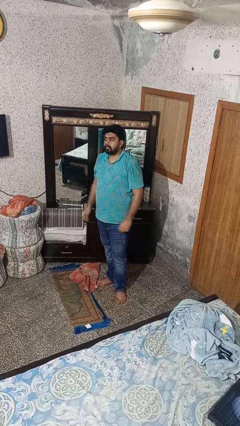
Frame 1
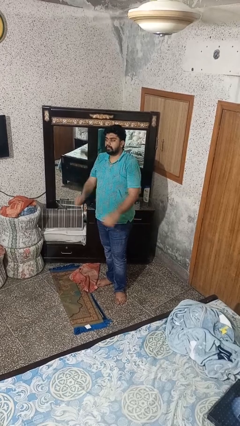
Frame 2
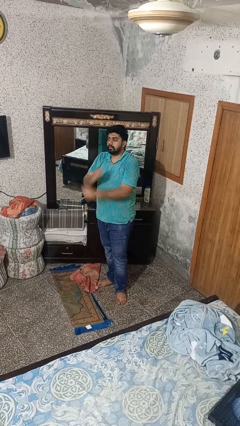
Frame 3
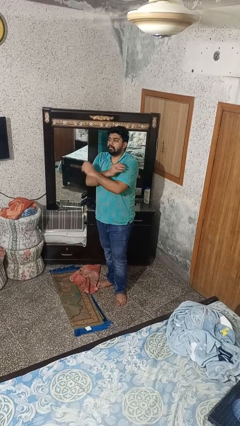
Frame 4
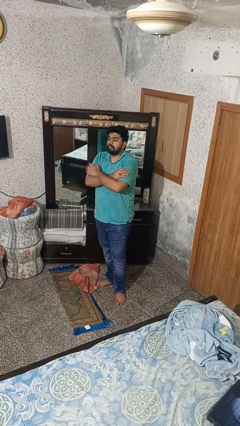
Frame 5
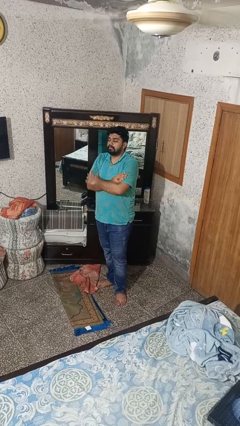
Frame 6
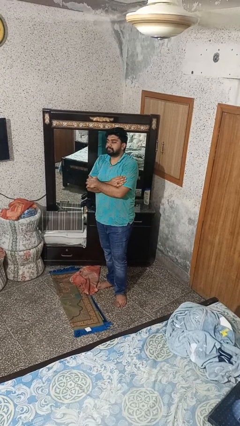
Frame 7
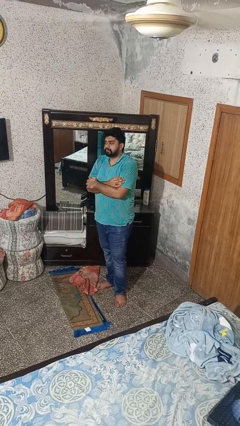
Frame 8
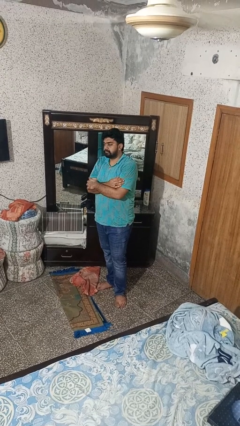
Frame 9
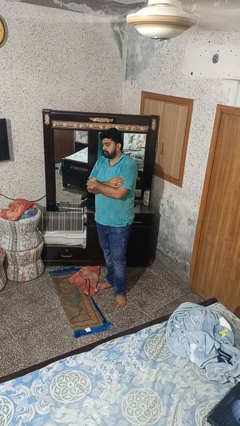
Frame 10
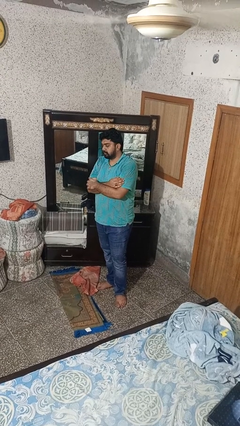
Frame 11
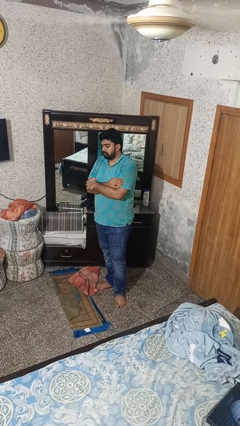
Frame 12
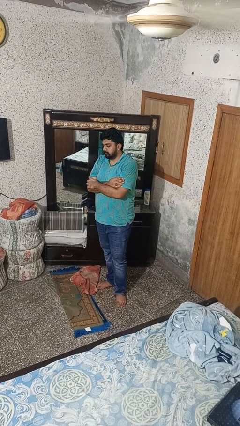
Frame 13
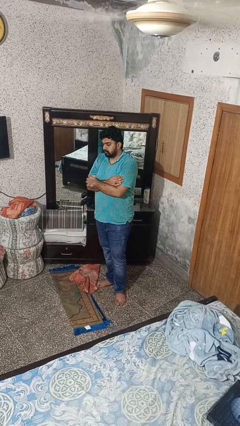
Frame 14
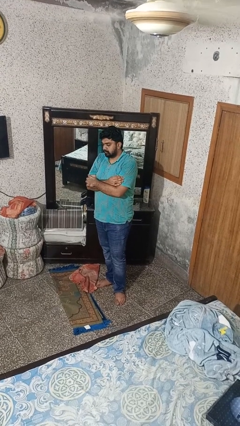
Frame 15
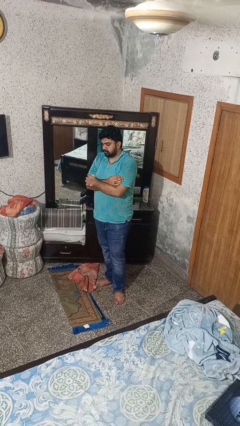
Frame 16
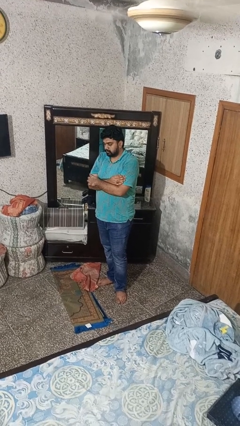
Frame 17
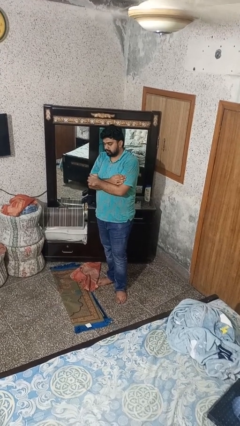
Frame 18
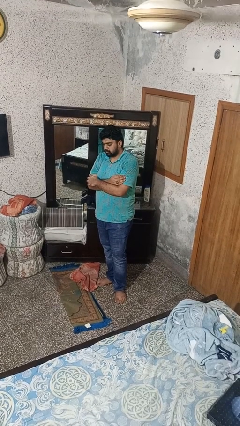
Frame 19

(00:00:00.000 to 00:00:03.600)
person crosses arms

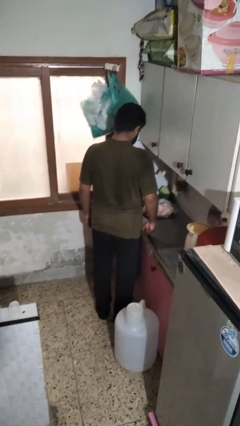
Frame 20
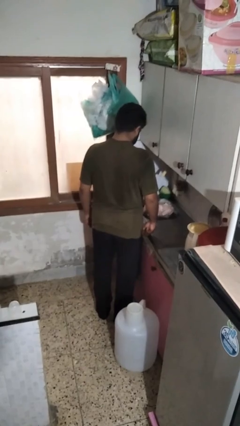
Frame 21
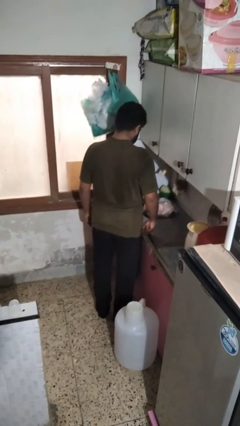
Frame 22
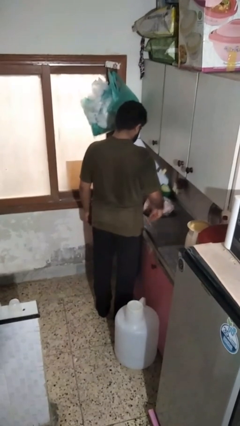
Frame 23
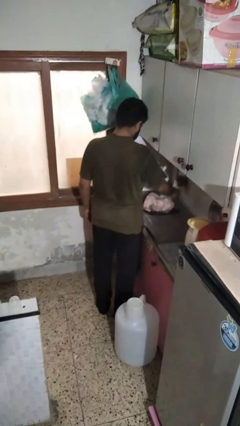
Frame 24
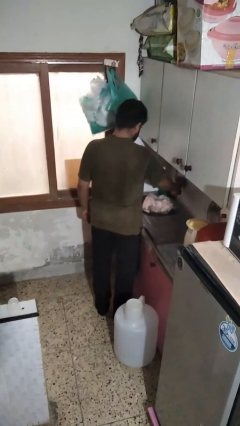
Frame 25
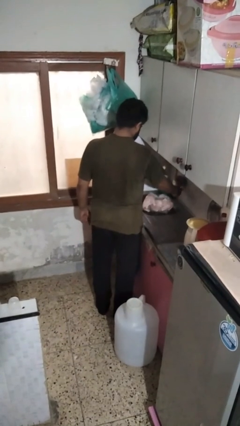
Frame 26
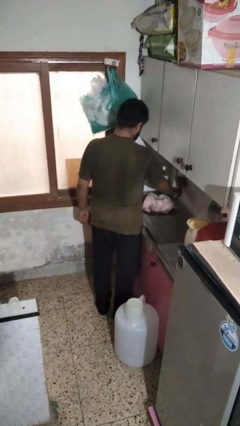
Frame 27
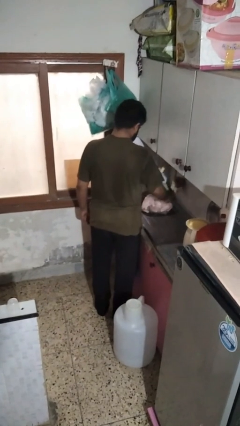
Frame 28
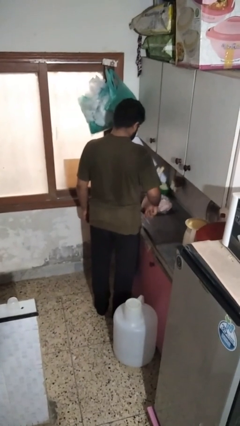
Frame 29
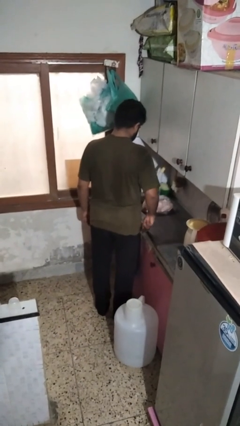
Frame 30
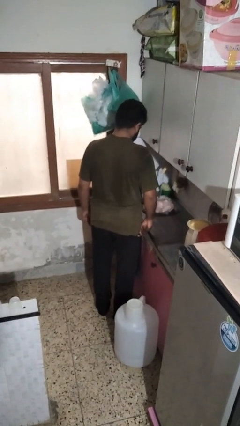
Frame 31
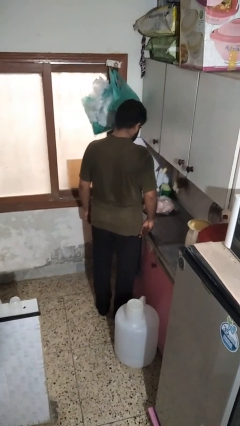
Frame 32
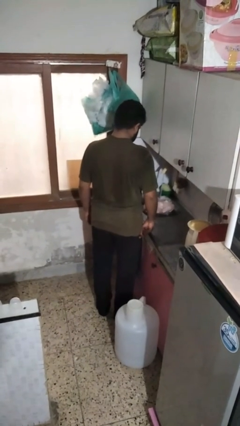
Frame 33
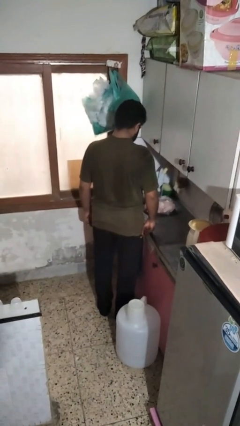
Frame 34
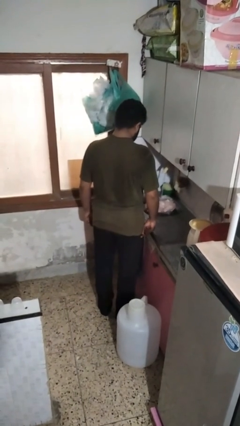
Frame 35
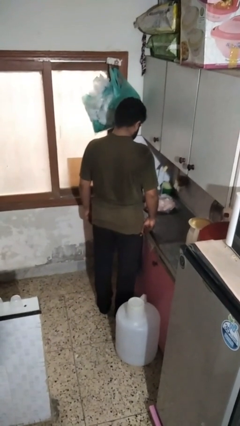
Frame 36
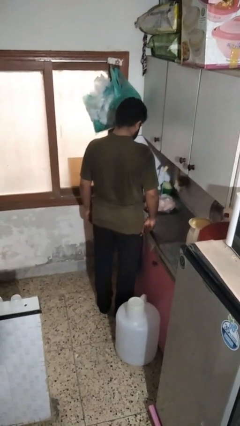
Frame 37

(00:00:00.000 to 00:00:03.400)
person turns on faucet

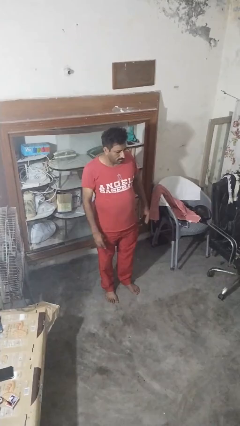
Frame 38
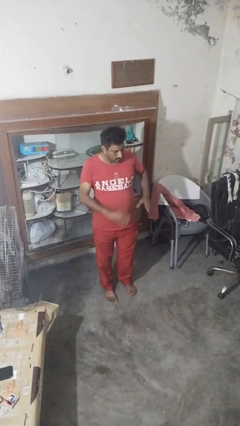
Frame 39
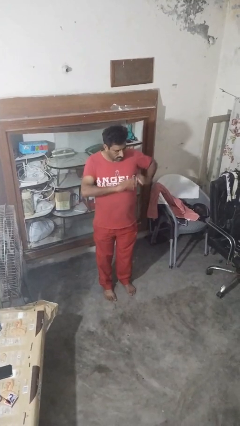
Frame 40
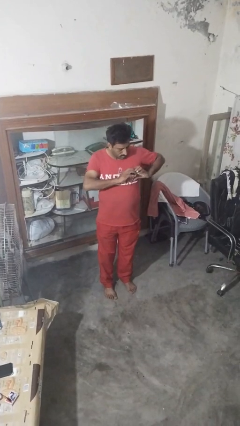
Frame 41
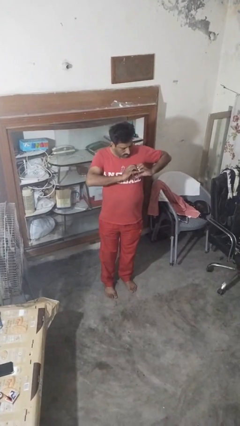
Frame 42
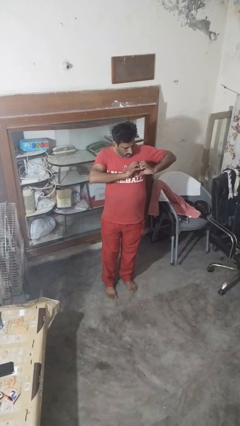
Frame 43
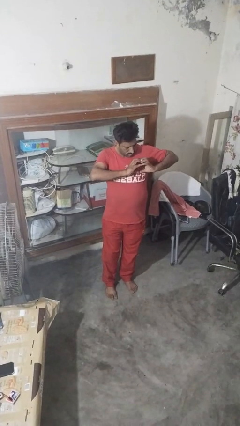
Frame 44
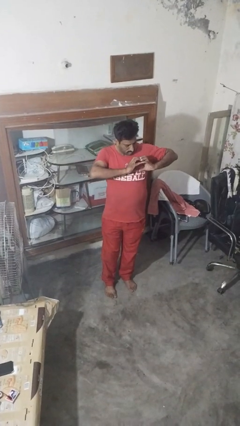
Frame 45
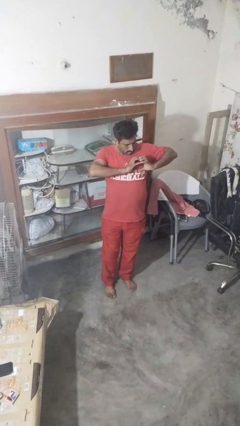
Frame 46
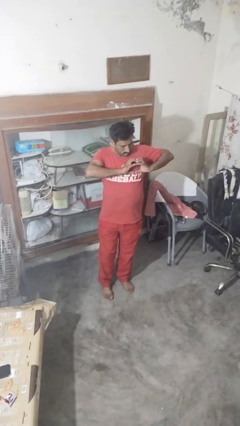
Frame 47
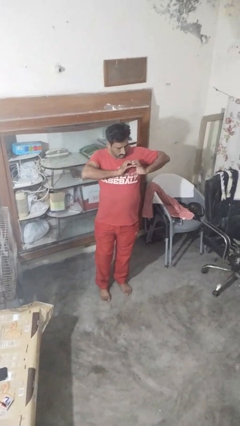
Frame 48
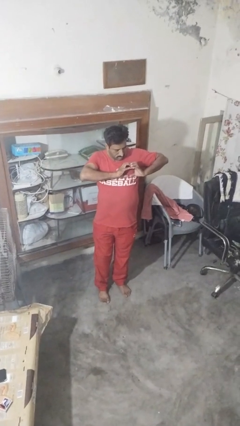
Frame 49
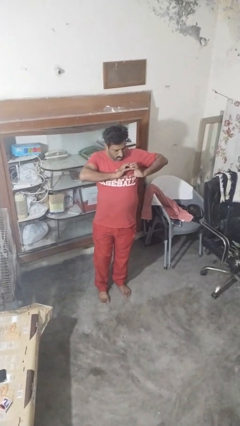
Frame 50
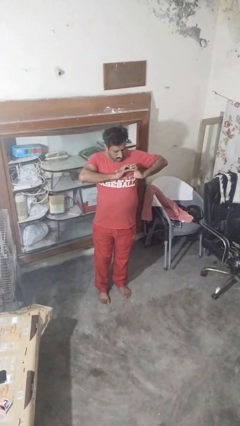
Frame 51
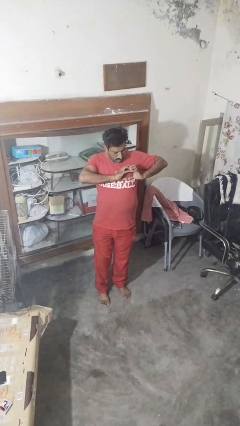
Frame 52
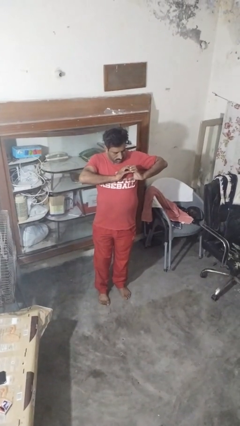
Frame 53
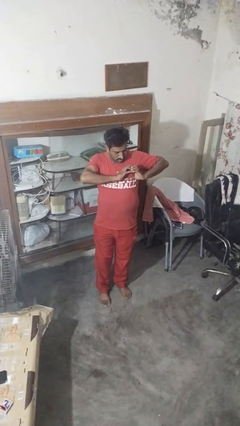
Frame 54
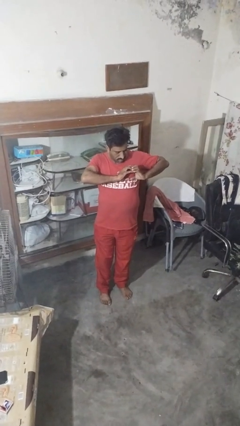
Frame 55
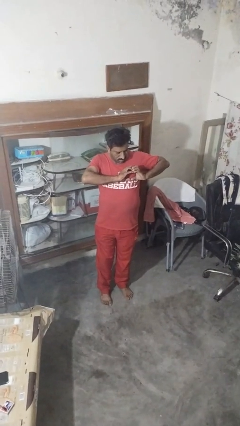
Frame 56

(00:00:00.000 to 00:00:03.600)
person gestures heart

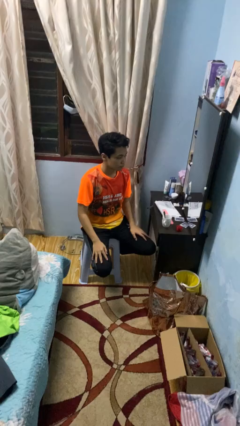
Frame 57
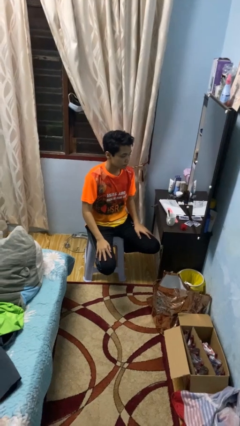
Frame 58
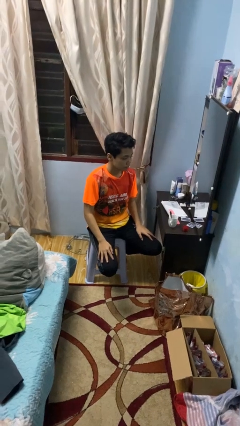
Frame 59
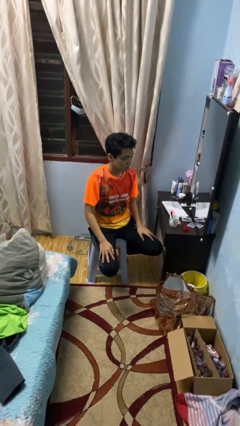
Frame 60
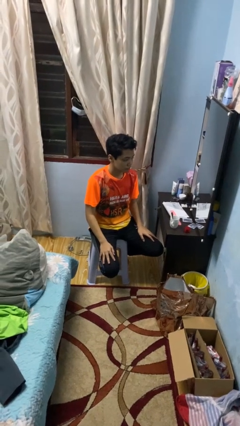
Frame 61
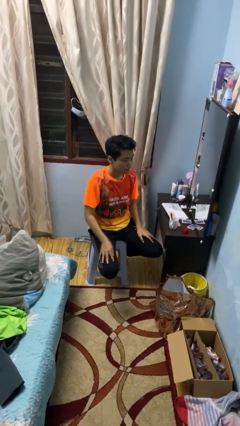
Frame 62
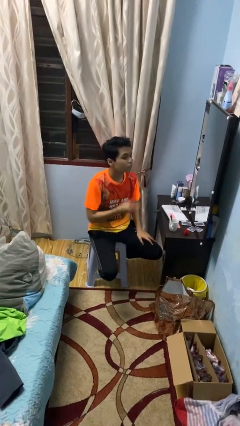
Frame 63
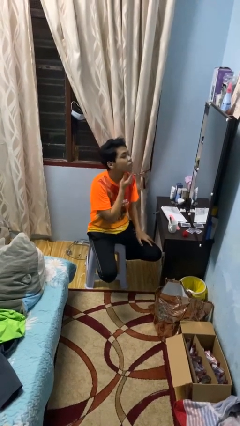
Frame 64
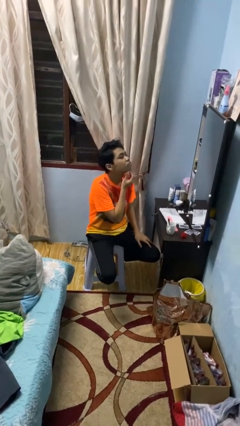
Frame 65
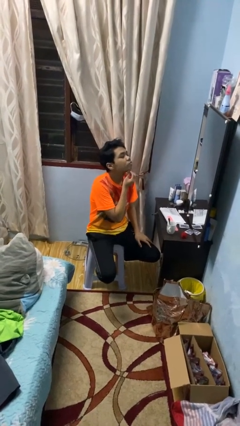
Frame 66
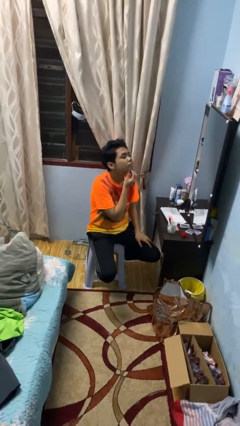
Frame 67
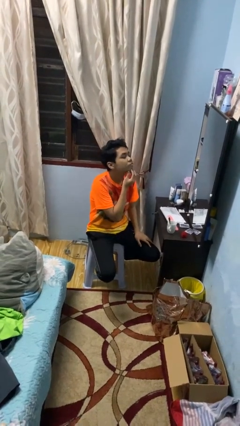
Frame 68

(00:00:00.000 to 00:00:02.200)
person strokes chin

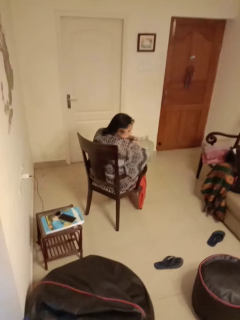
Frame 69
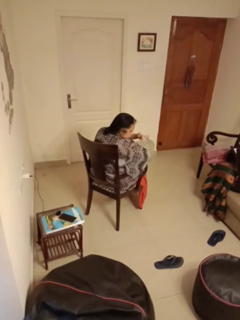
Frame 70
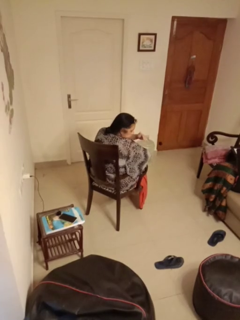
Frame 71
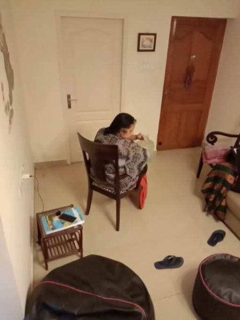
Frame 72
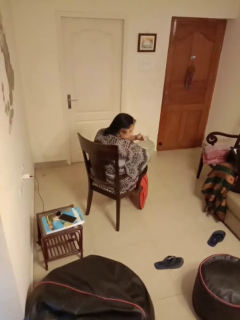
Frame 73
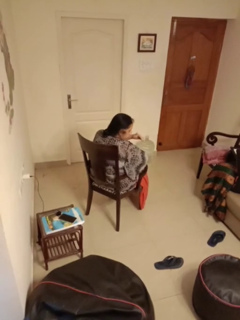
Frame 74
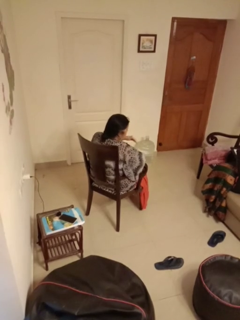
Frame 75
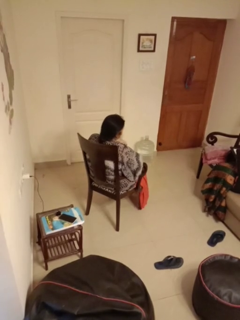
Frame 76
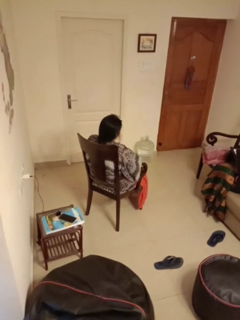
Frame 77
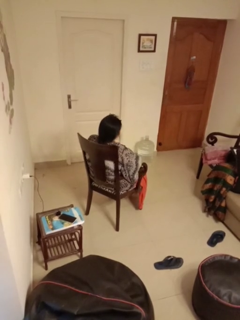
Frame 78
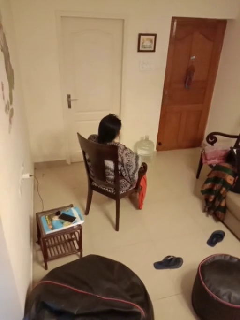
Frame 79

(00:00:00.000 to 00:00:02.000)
person swats bug

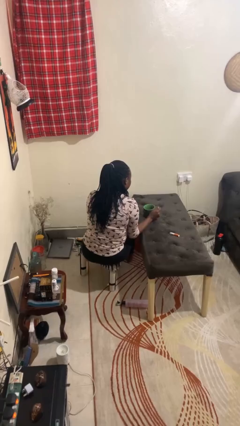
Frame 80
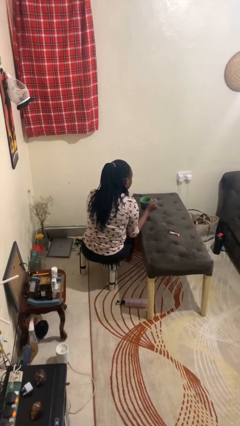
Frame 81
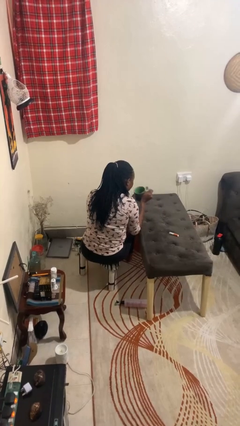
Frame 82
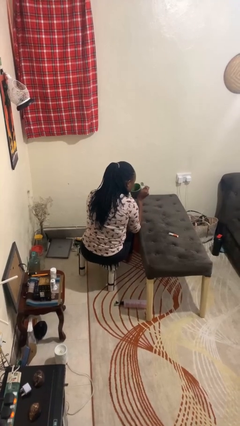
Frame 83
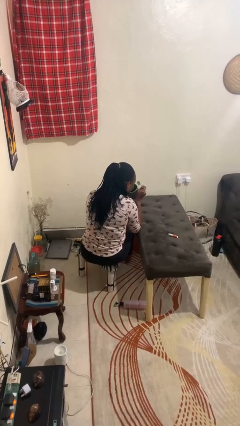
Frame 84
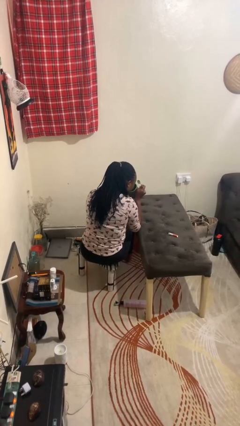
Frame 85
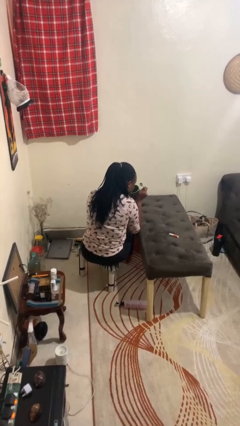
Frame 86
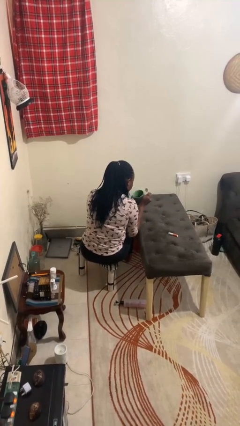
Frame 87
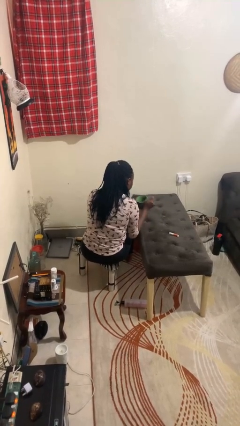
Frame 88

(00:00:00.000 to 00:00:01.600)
person drinks from mug

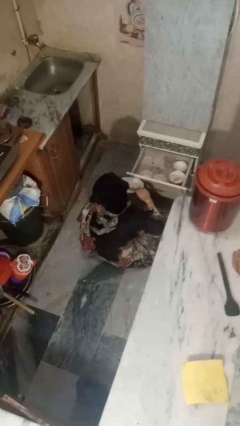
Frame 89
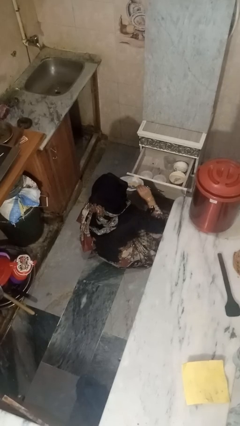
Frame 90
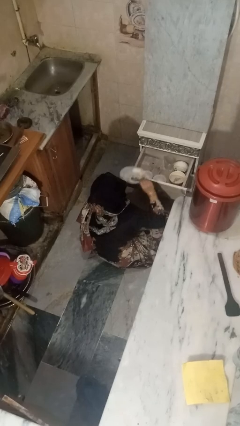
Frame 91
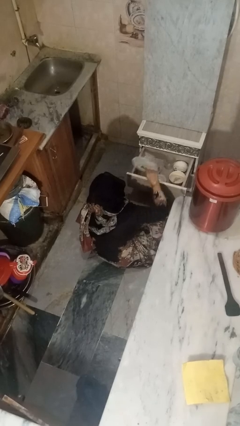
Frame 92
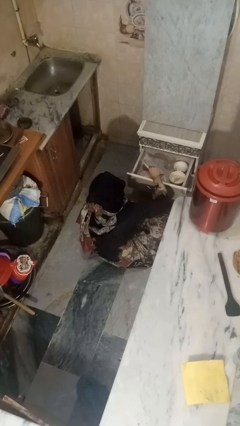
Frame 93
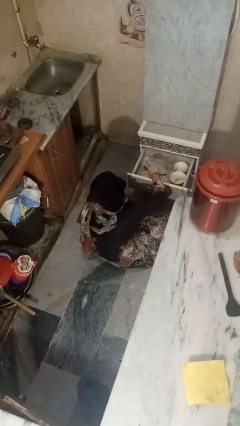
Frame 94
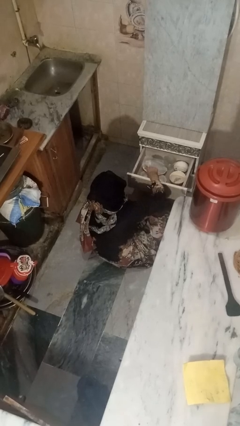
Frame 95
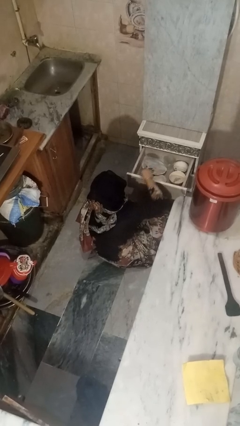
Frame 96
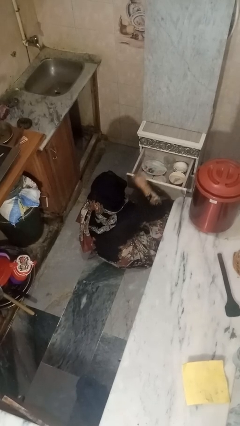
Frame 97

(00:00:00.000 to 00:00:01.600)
person puts object into kitchen drawer
